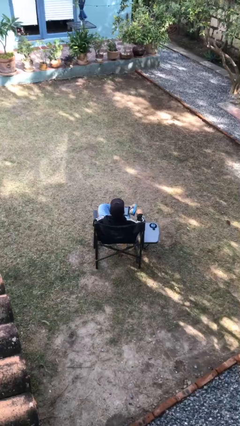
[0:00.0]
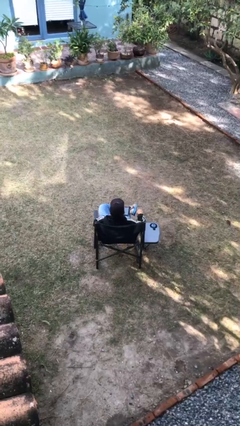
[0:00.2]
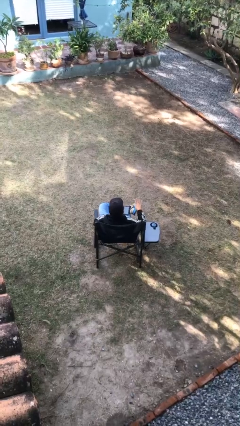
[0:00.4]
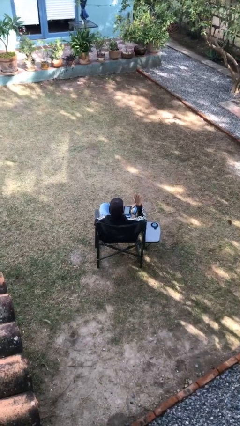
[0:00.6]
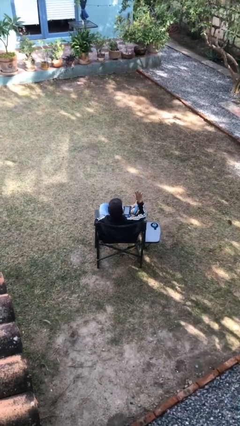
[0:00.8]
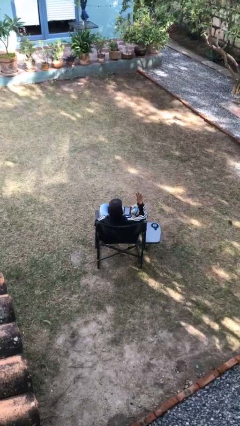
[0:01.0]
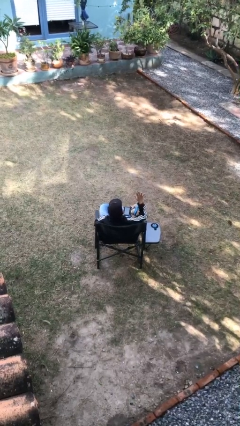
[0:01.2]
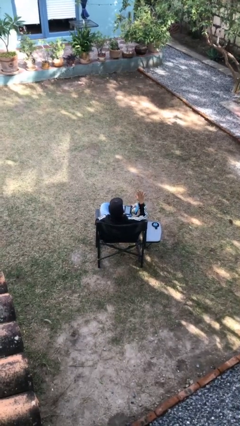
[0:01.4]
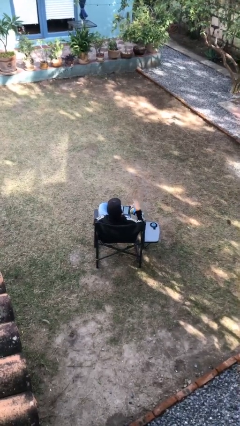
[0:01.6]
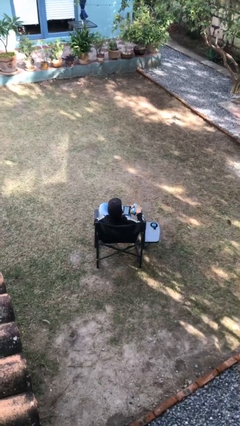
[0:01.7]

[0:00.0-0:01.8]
person gestures number five

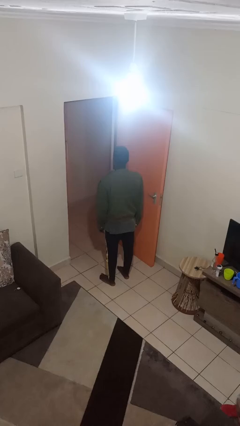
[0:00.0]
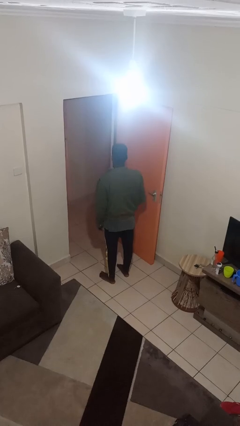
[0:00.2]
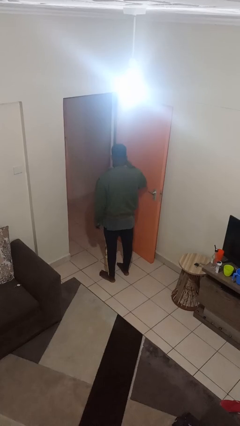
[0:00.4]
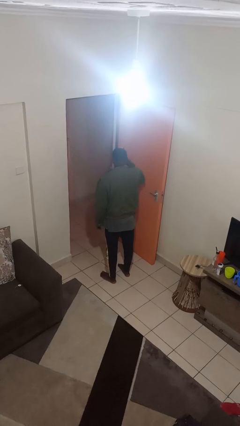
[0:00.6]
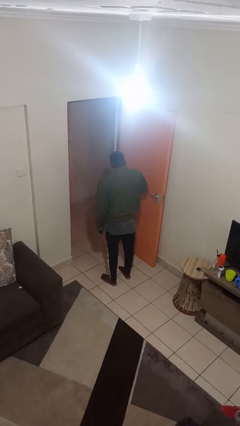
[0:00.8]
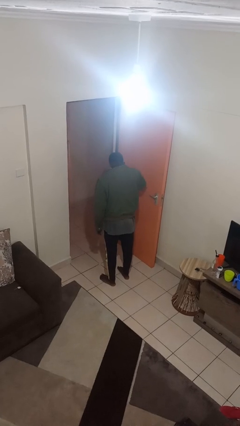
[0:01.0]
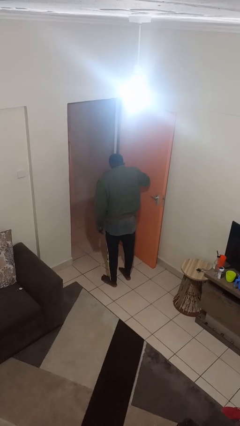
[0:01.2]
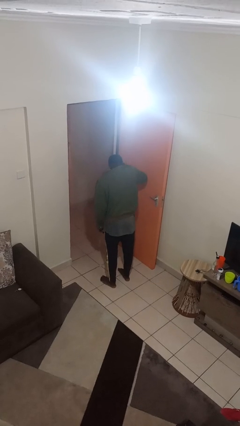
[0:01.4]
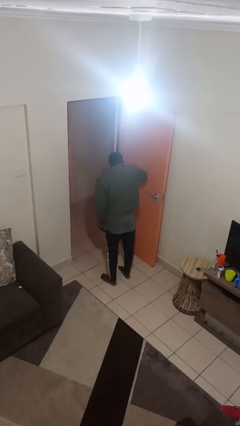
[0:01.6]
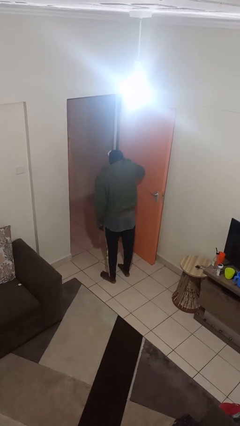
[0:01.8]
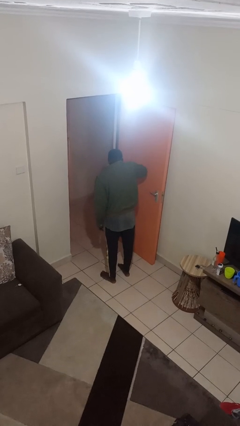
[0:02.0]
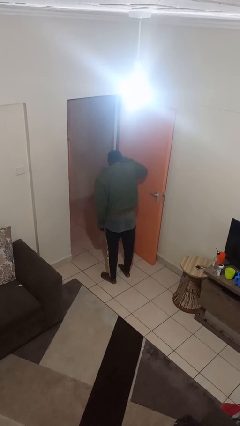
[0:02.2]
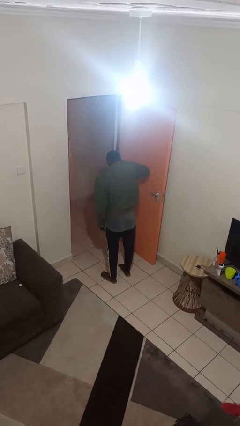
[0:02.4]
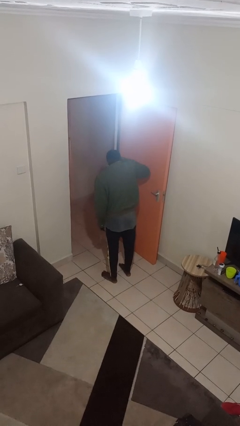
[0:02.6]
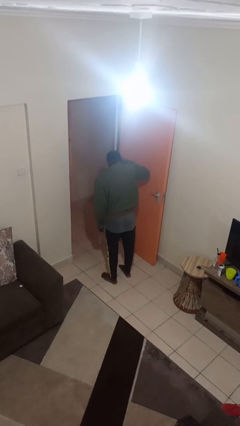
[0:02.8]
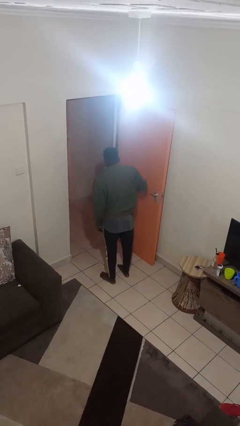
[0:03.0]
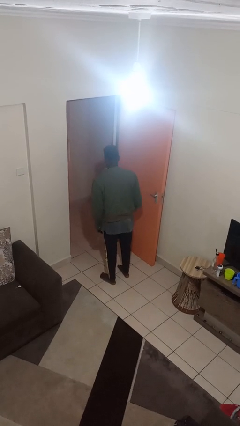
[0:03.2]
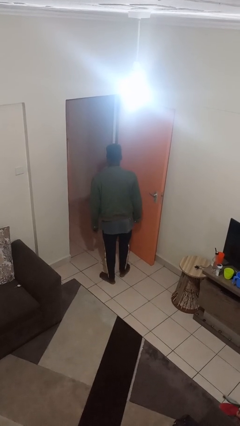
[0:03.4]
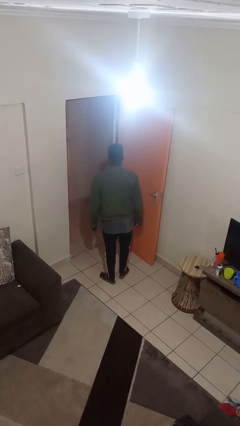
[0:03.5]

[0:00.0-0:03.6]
person brushes hair

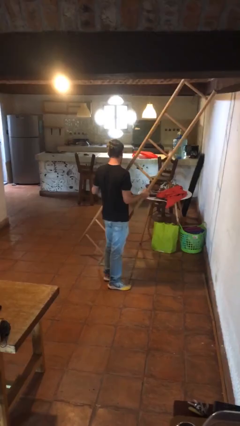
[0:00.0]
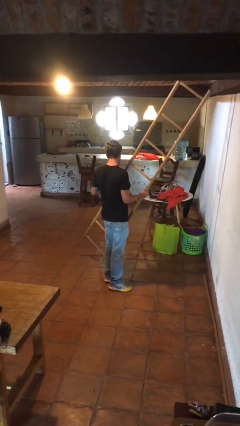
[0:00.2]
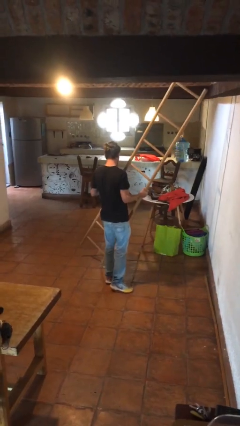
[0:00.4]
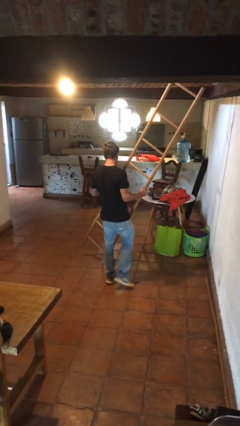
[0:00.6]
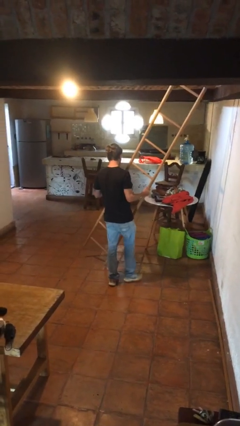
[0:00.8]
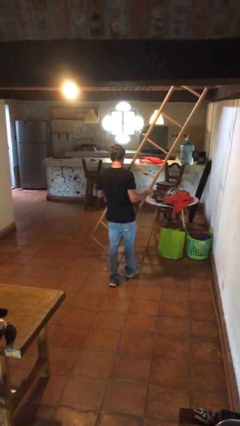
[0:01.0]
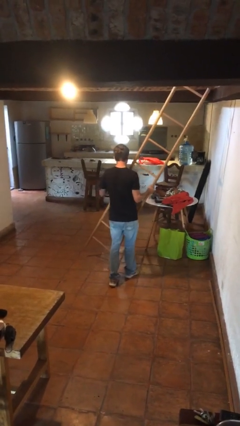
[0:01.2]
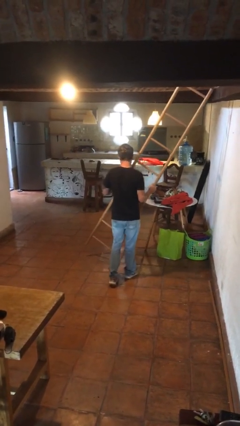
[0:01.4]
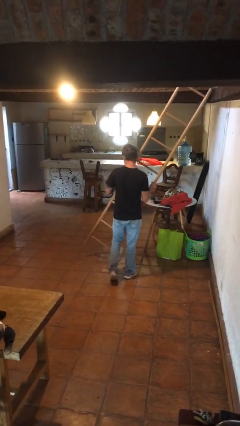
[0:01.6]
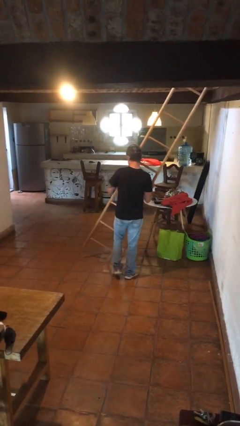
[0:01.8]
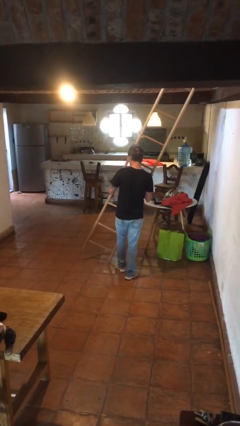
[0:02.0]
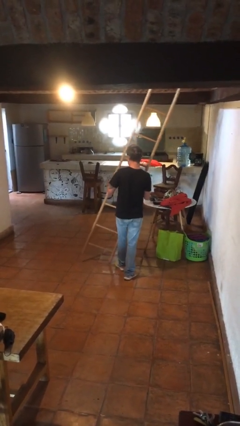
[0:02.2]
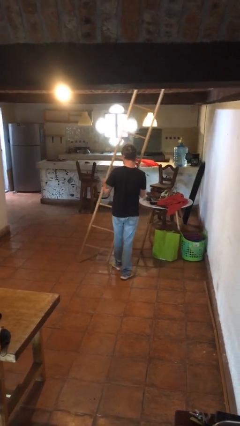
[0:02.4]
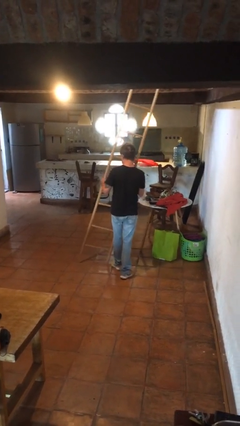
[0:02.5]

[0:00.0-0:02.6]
person carries furniture

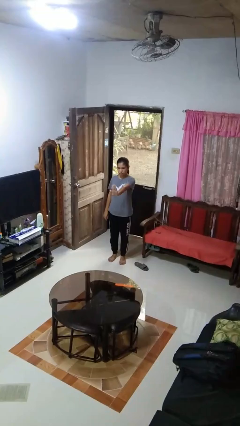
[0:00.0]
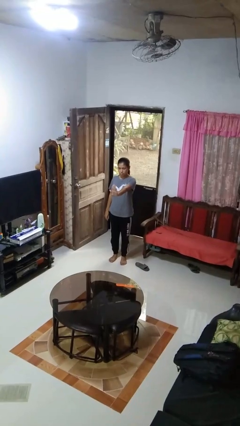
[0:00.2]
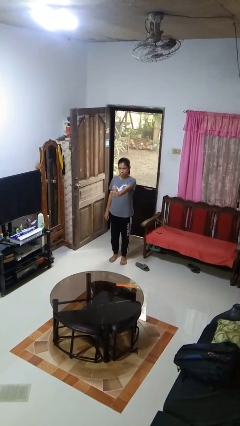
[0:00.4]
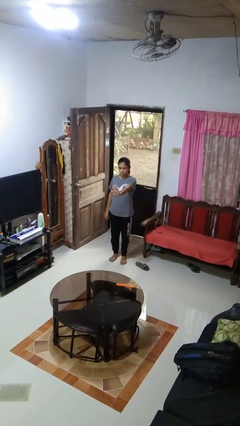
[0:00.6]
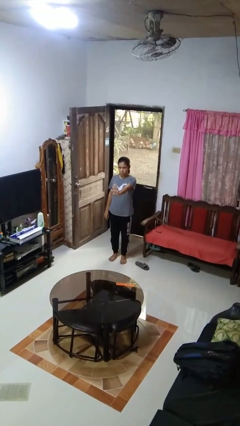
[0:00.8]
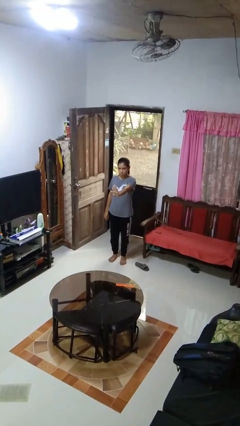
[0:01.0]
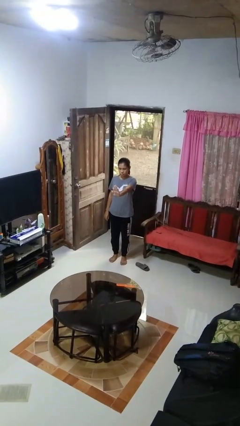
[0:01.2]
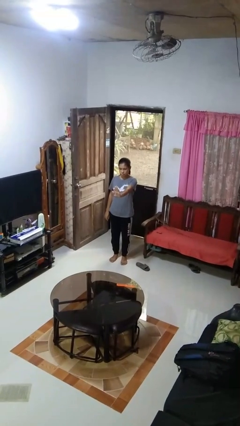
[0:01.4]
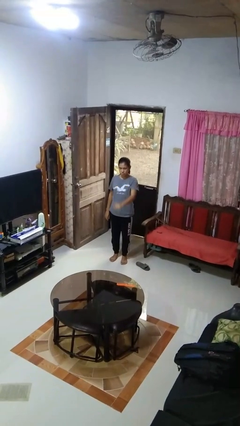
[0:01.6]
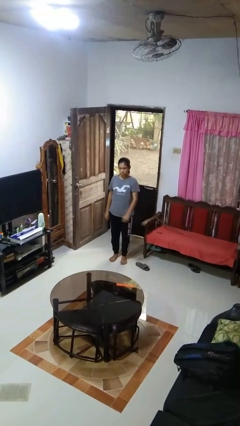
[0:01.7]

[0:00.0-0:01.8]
person gestures stop

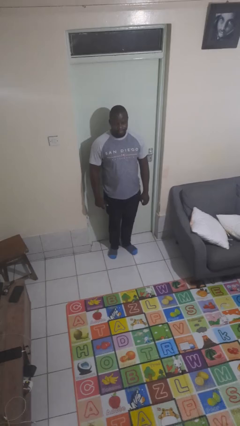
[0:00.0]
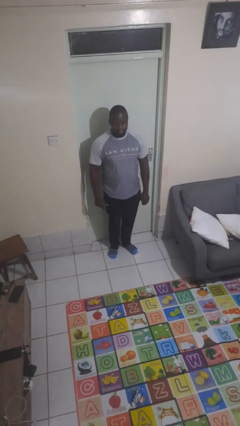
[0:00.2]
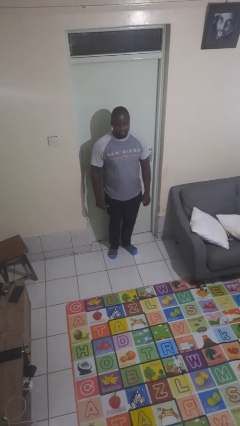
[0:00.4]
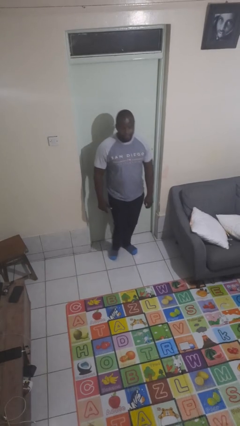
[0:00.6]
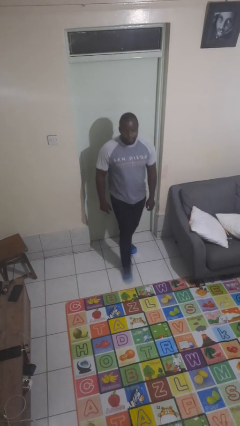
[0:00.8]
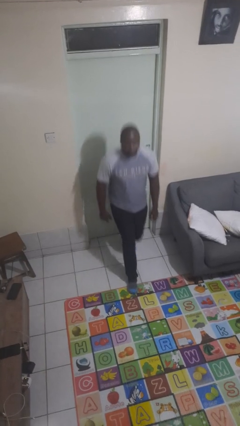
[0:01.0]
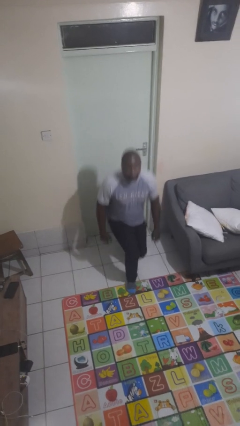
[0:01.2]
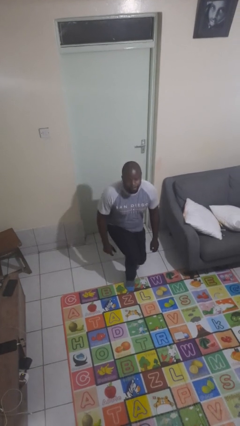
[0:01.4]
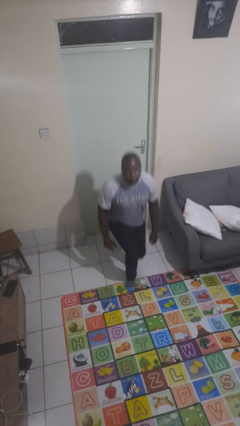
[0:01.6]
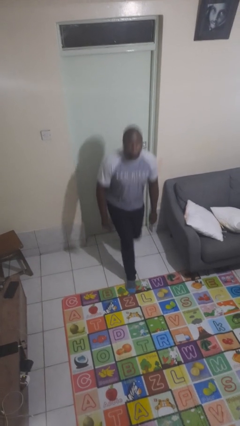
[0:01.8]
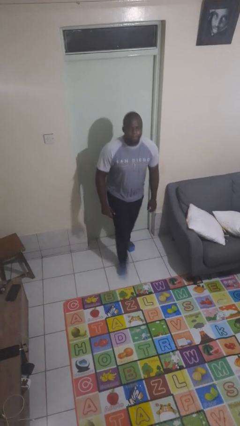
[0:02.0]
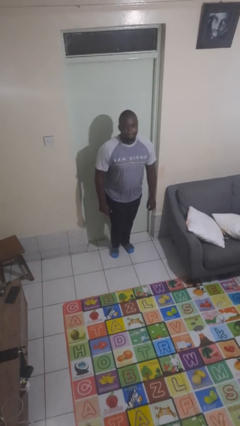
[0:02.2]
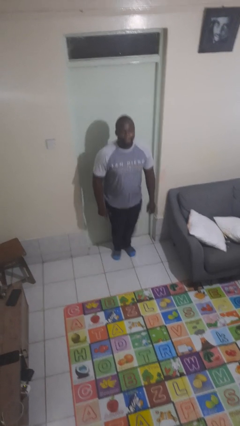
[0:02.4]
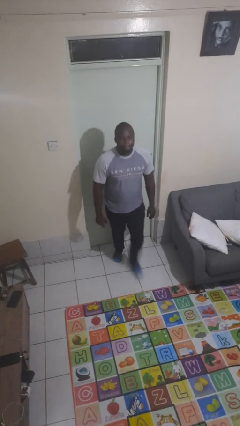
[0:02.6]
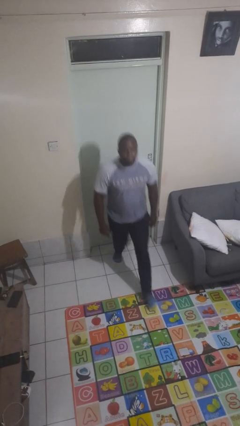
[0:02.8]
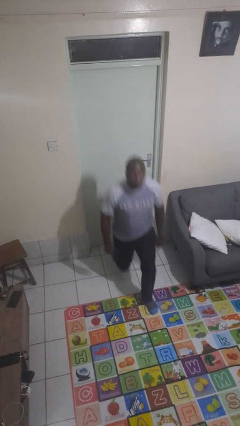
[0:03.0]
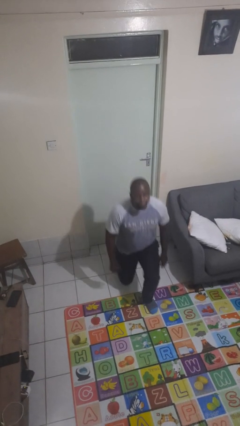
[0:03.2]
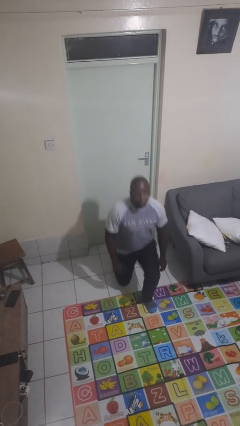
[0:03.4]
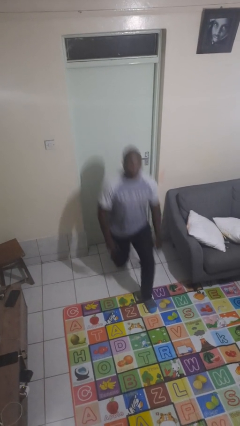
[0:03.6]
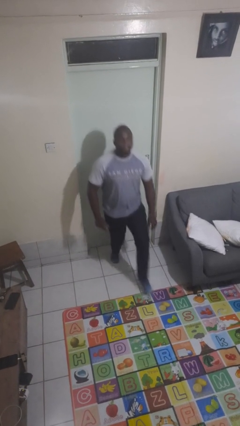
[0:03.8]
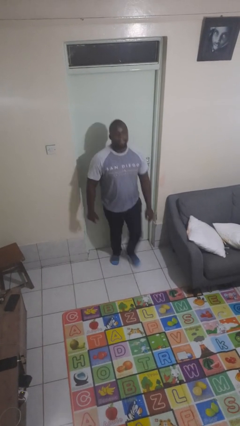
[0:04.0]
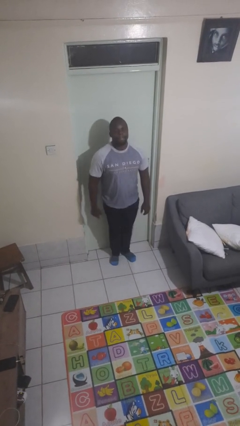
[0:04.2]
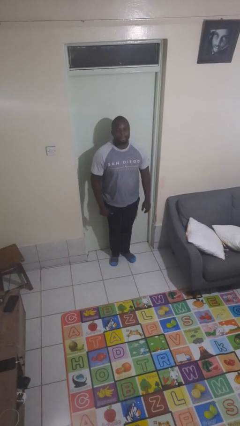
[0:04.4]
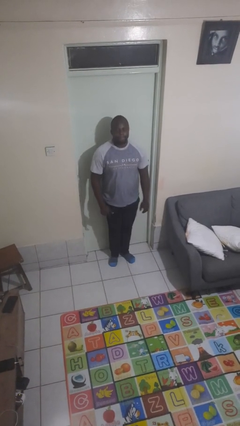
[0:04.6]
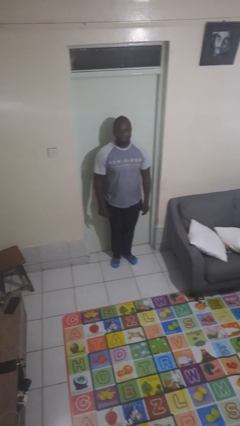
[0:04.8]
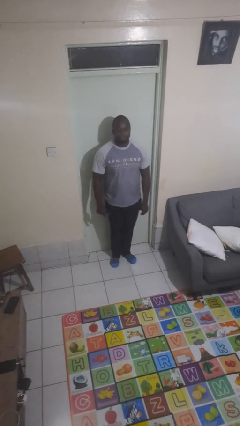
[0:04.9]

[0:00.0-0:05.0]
person exercises with lunges

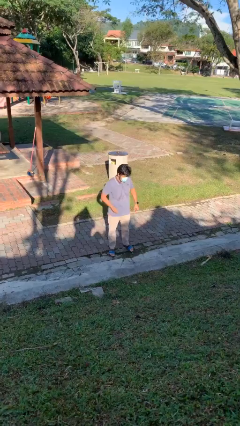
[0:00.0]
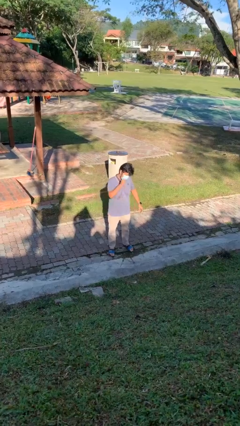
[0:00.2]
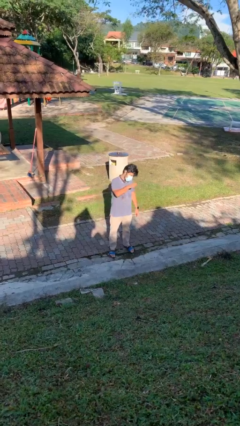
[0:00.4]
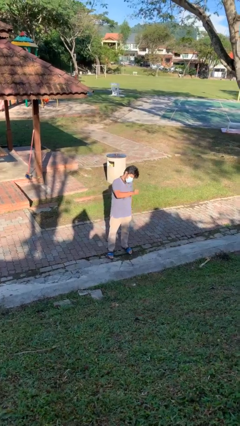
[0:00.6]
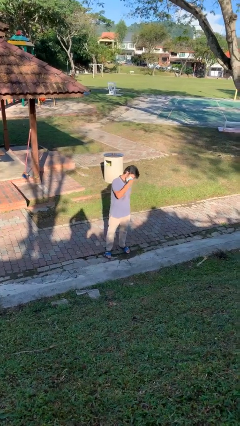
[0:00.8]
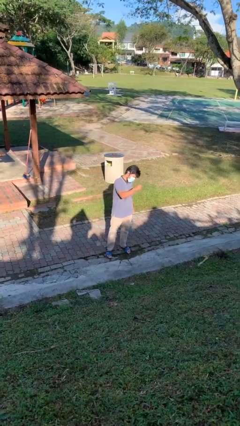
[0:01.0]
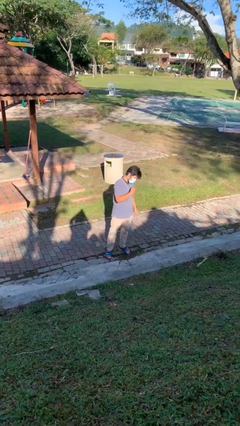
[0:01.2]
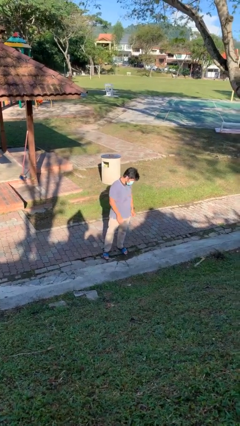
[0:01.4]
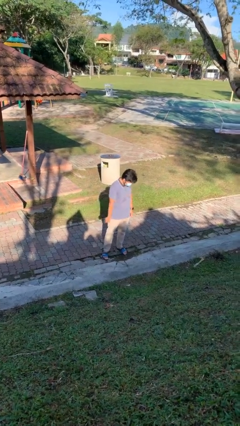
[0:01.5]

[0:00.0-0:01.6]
person snaps fingers

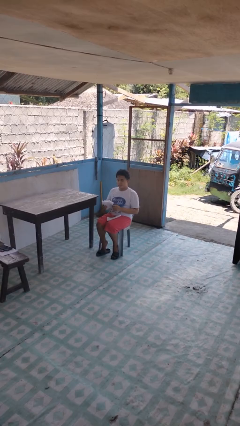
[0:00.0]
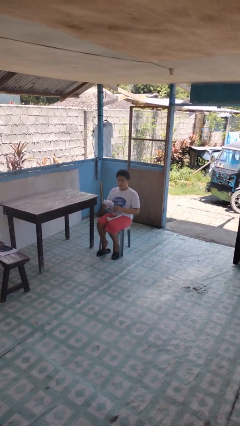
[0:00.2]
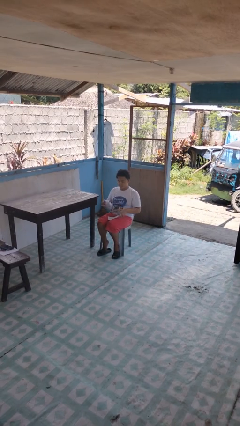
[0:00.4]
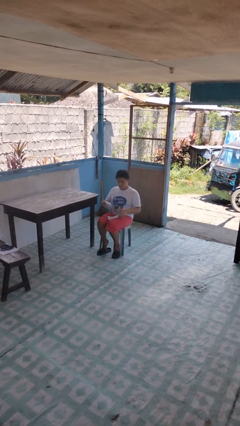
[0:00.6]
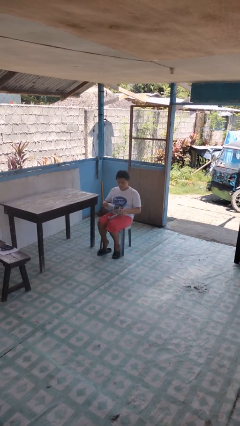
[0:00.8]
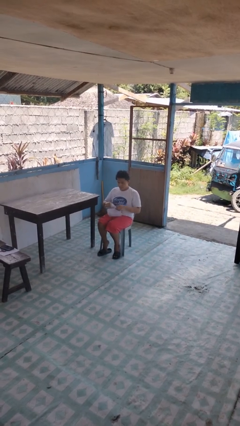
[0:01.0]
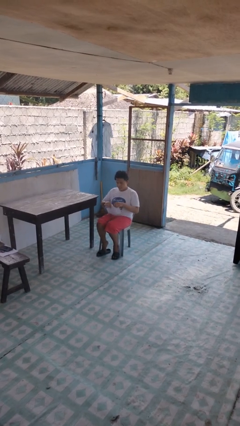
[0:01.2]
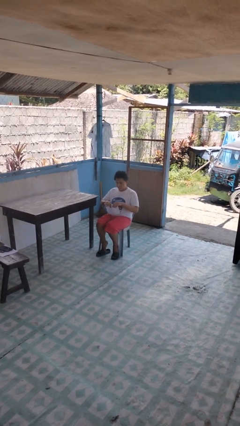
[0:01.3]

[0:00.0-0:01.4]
person tears paper
